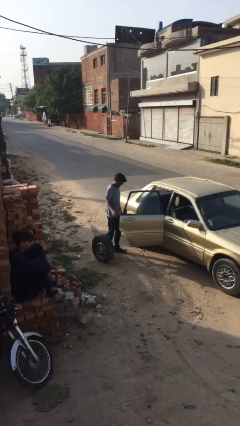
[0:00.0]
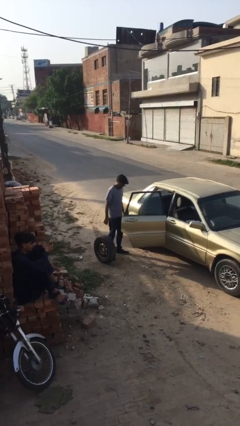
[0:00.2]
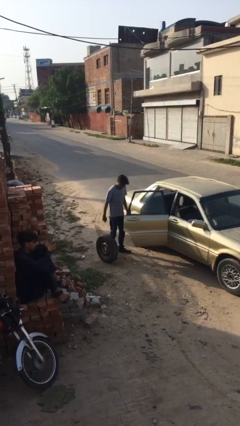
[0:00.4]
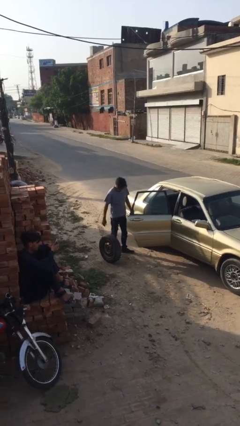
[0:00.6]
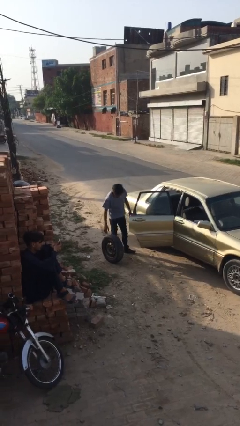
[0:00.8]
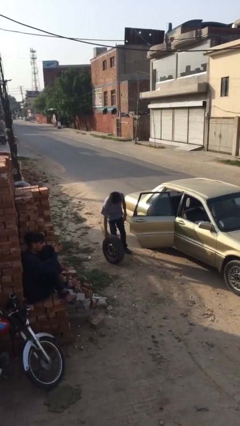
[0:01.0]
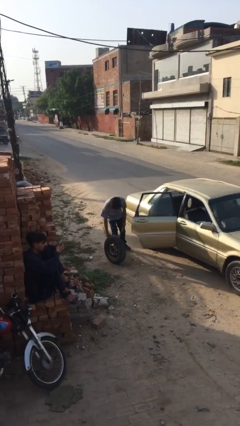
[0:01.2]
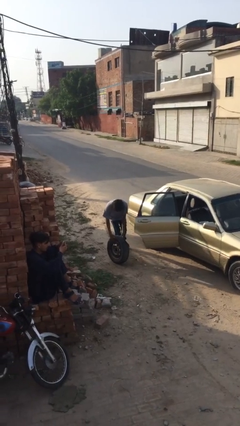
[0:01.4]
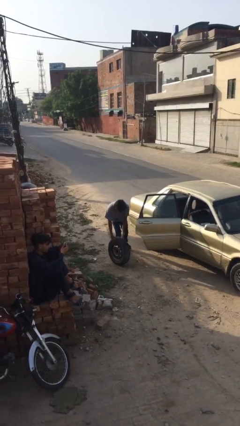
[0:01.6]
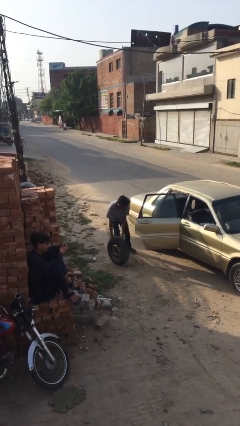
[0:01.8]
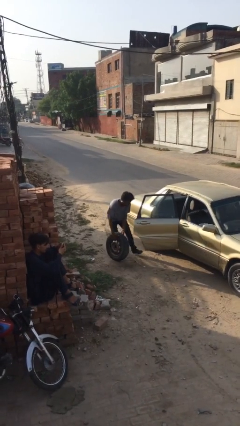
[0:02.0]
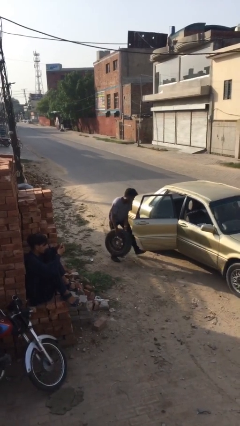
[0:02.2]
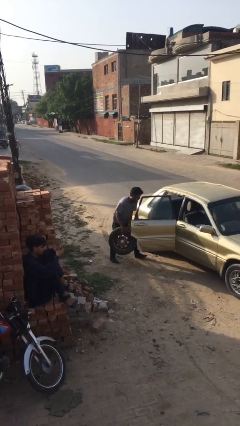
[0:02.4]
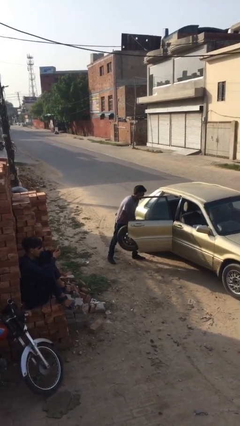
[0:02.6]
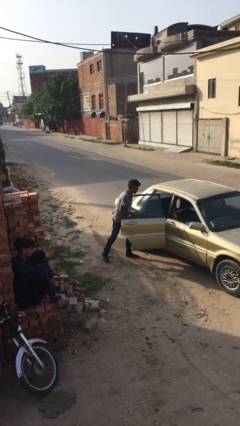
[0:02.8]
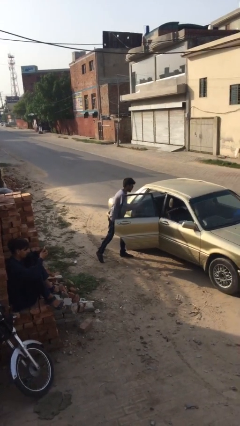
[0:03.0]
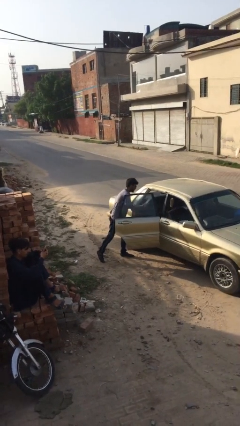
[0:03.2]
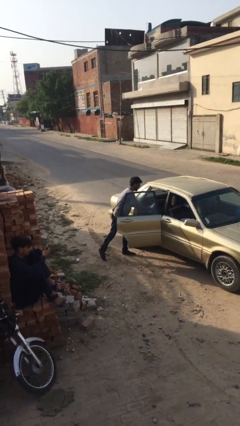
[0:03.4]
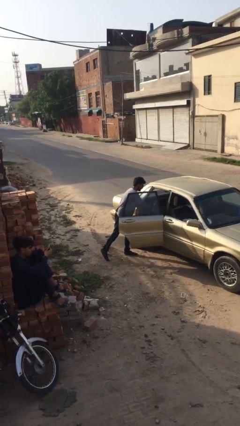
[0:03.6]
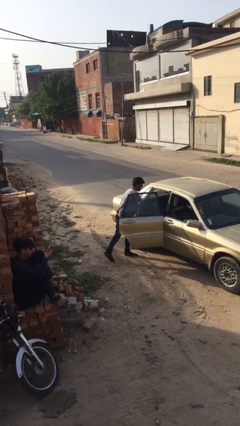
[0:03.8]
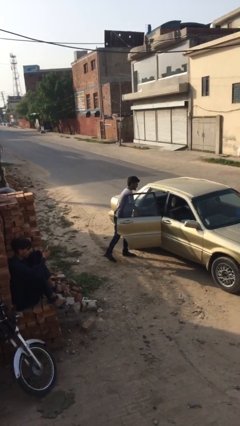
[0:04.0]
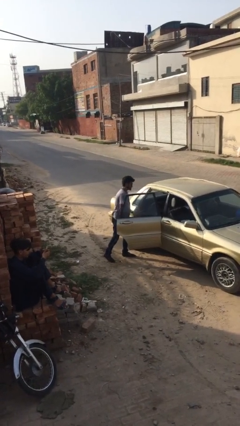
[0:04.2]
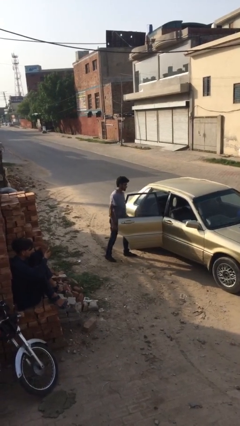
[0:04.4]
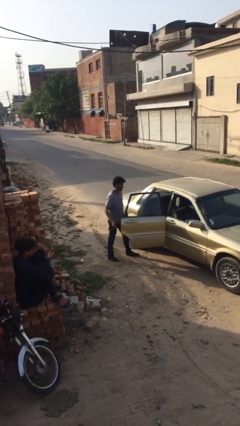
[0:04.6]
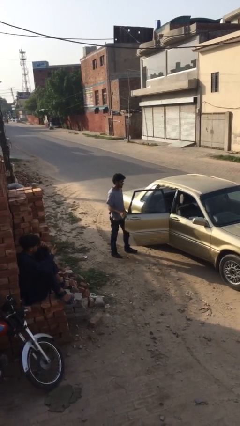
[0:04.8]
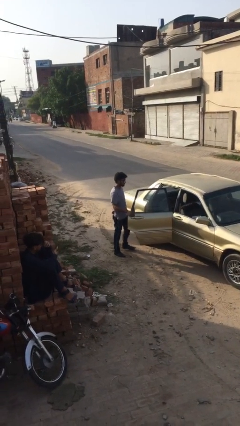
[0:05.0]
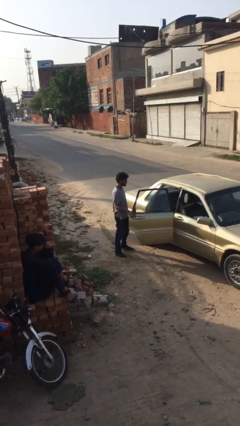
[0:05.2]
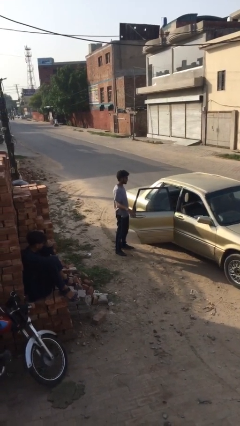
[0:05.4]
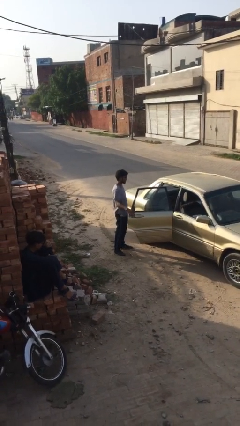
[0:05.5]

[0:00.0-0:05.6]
person loads car

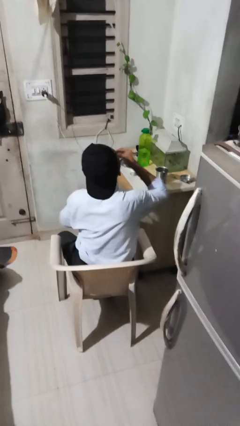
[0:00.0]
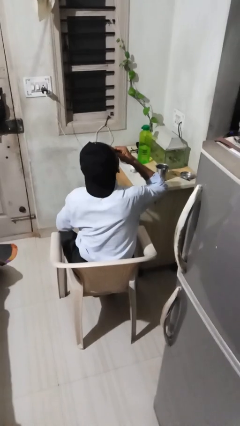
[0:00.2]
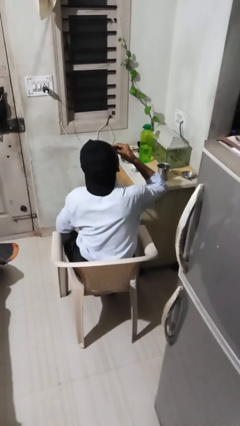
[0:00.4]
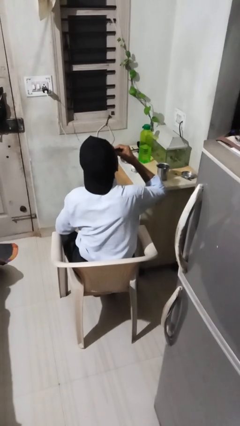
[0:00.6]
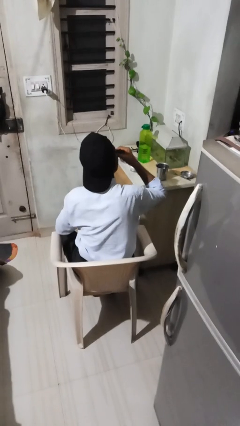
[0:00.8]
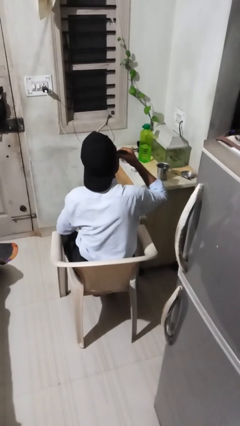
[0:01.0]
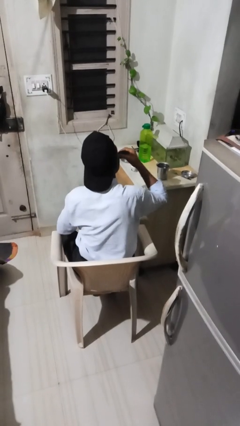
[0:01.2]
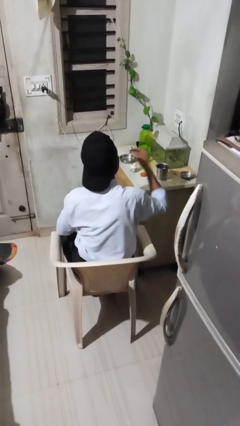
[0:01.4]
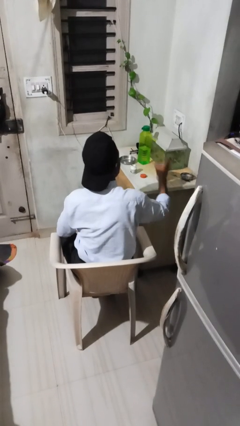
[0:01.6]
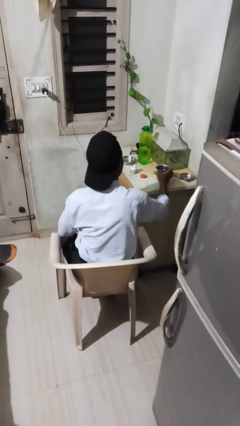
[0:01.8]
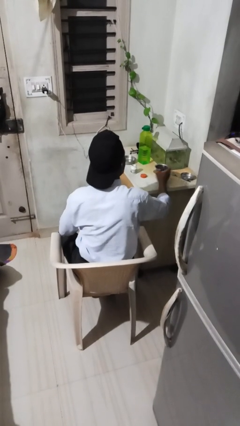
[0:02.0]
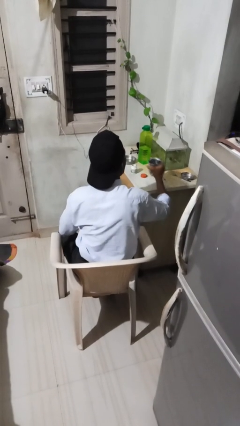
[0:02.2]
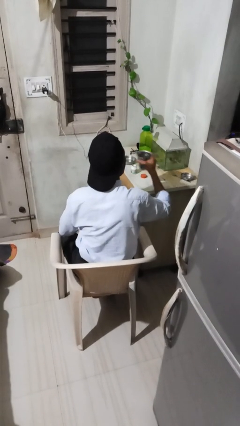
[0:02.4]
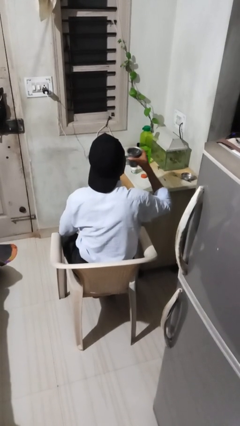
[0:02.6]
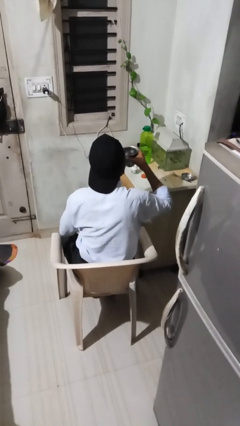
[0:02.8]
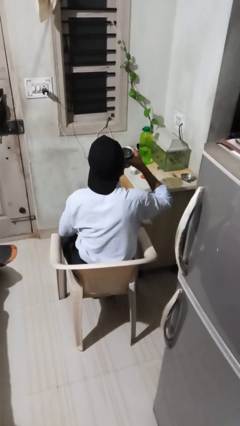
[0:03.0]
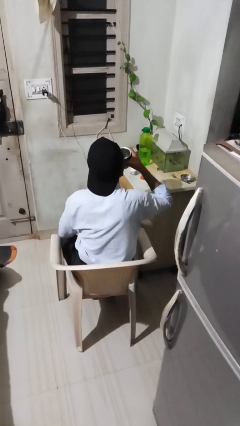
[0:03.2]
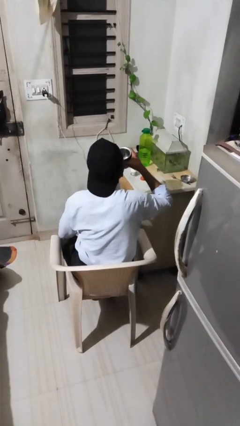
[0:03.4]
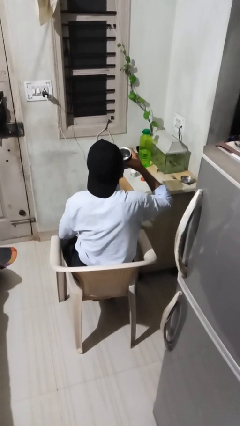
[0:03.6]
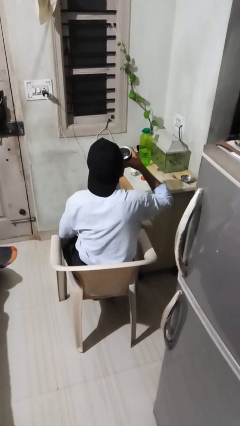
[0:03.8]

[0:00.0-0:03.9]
person drinks from cup

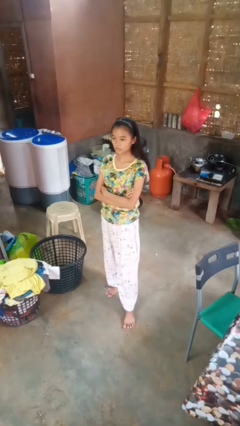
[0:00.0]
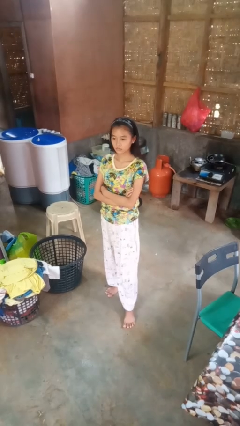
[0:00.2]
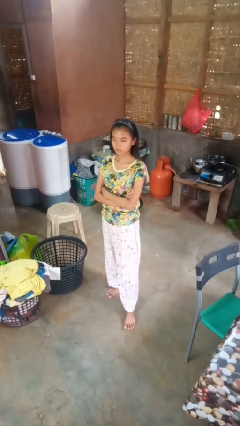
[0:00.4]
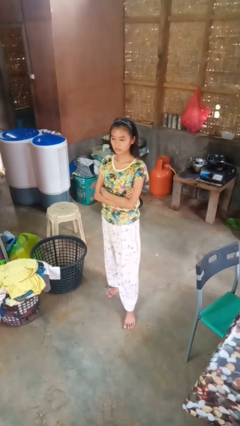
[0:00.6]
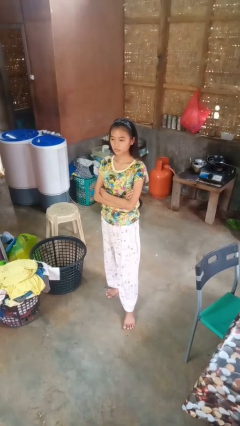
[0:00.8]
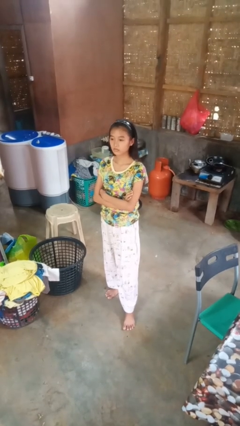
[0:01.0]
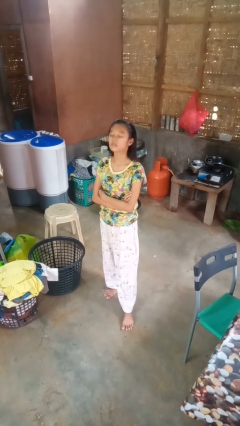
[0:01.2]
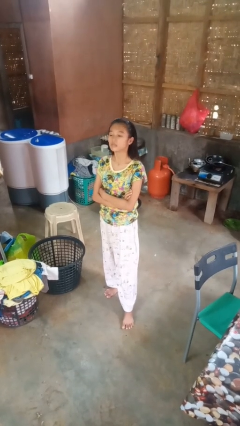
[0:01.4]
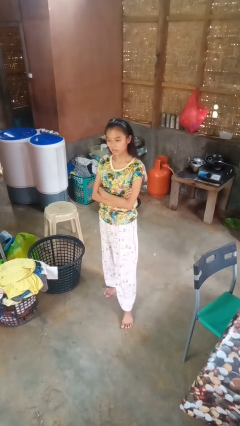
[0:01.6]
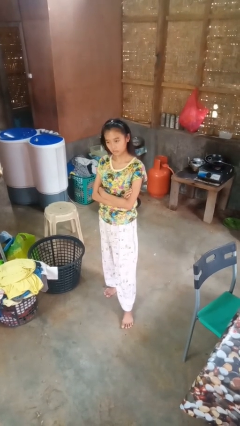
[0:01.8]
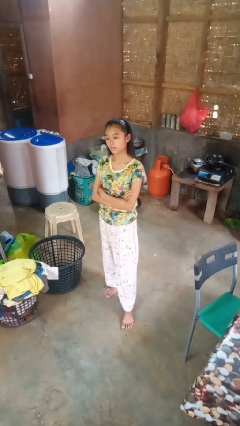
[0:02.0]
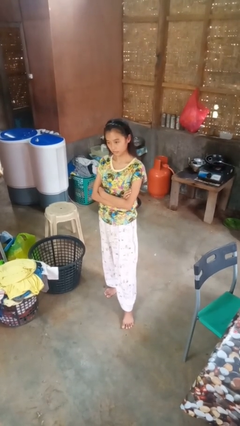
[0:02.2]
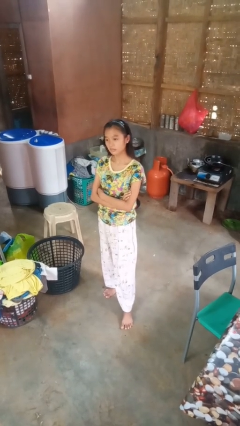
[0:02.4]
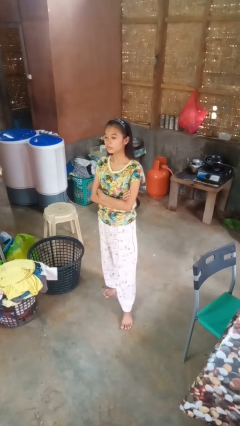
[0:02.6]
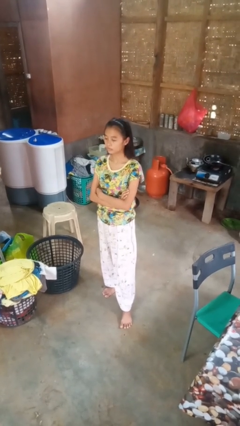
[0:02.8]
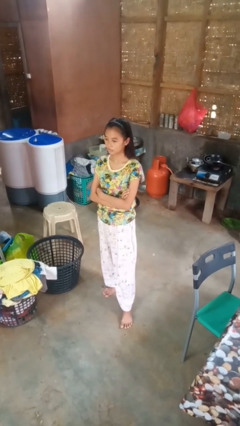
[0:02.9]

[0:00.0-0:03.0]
person nods head

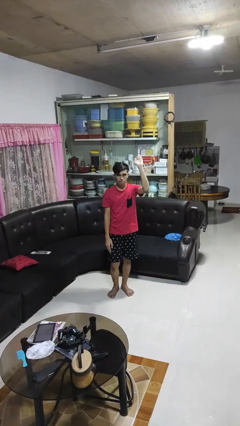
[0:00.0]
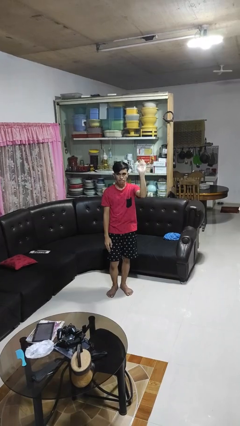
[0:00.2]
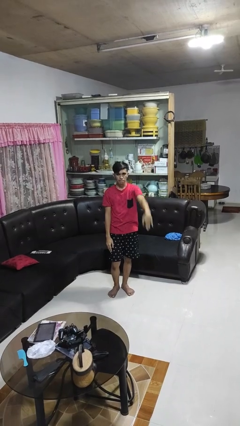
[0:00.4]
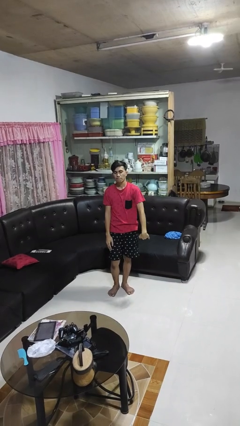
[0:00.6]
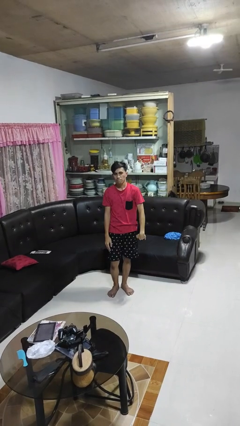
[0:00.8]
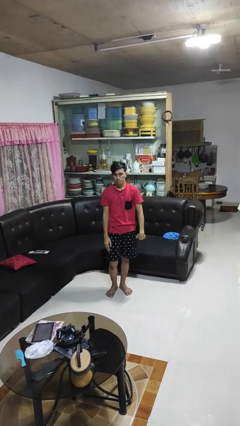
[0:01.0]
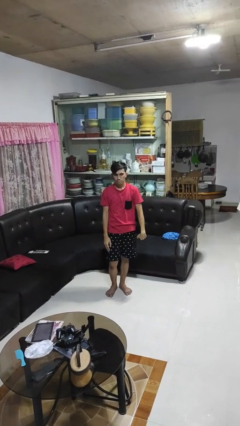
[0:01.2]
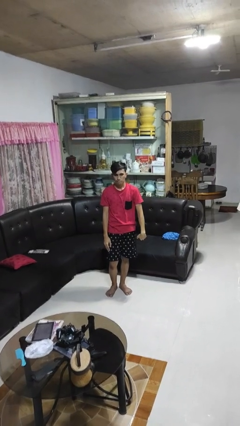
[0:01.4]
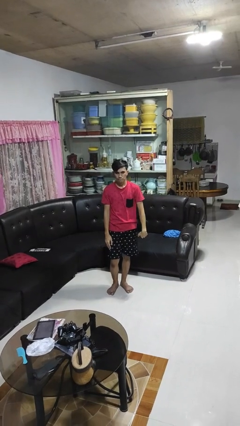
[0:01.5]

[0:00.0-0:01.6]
person gestures swipe down

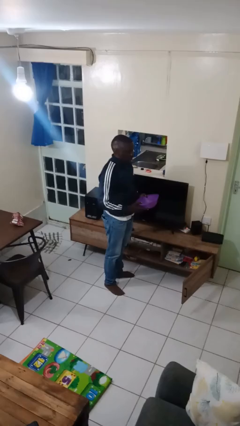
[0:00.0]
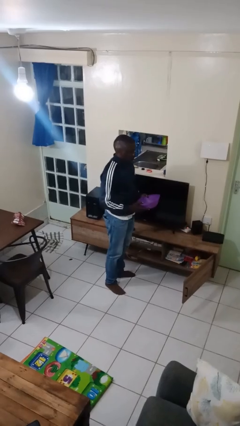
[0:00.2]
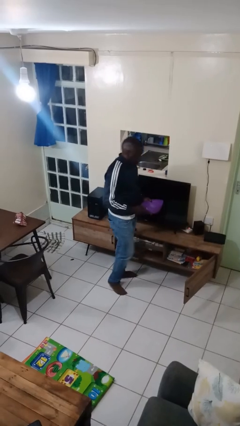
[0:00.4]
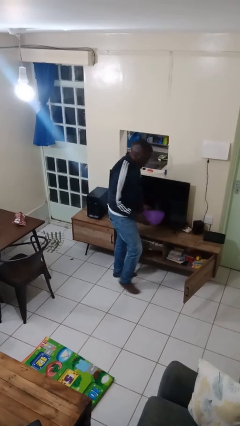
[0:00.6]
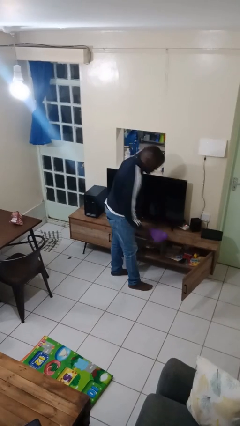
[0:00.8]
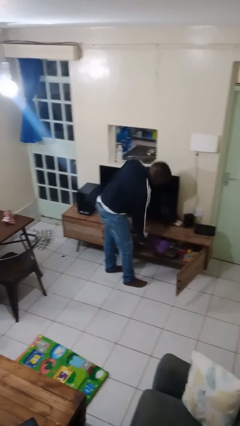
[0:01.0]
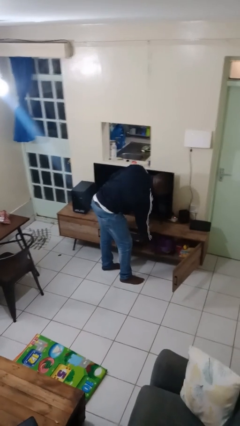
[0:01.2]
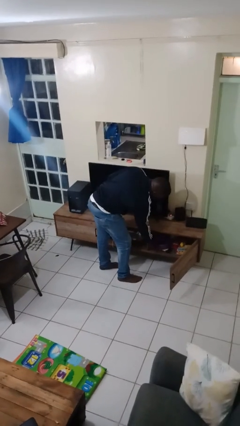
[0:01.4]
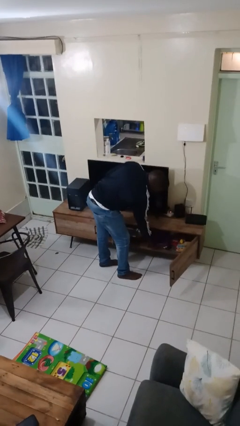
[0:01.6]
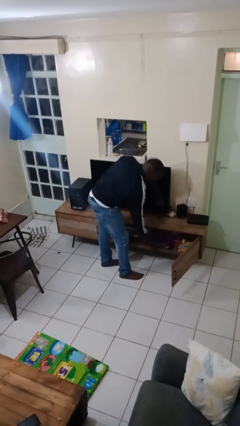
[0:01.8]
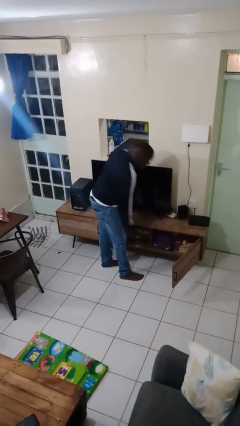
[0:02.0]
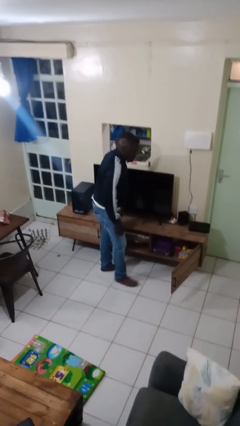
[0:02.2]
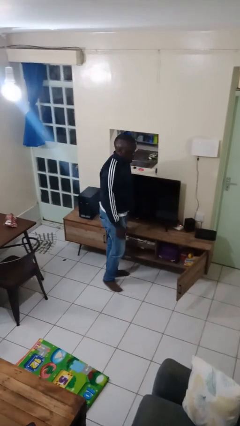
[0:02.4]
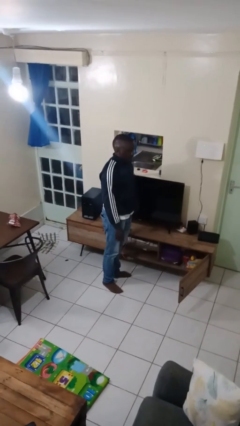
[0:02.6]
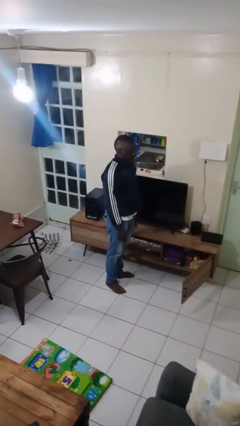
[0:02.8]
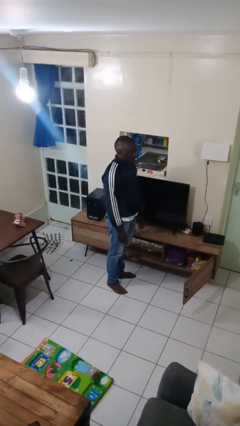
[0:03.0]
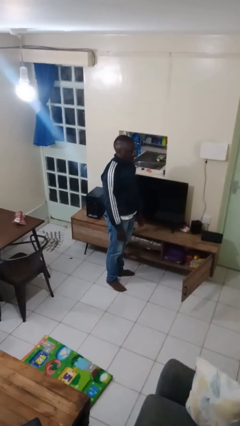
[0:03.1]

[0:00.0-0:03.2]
person puts down object into cabinet

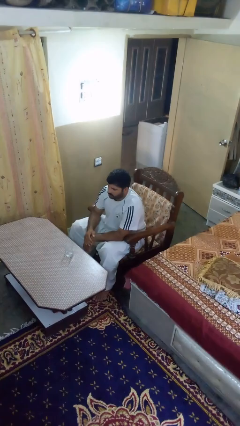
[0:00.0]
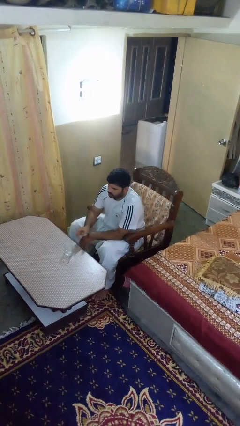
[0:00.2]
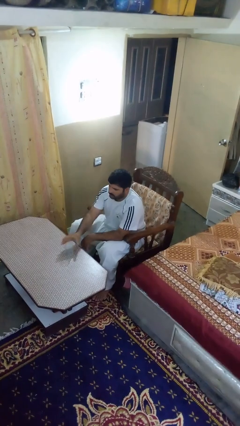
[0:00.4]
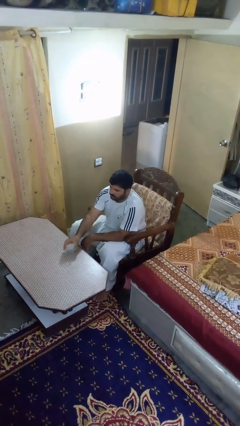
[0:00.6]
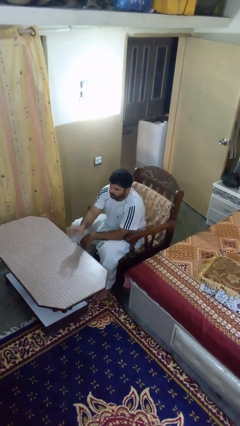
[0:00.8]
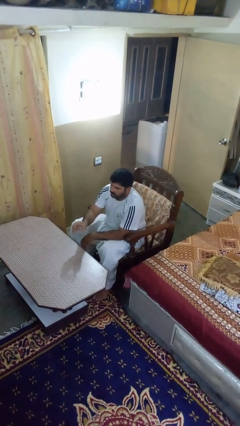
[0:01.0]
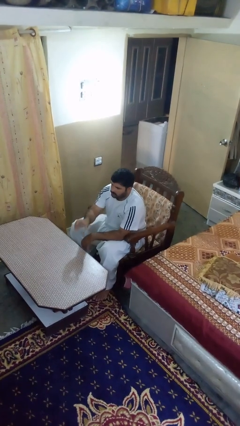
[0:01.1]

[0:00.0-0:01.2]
person picks up object from table
